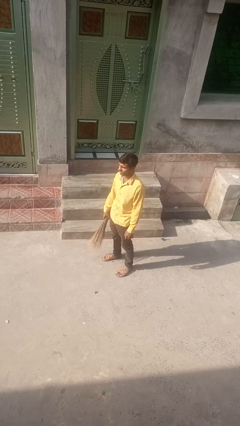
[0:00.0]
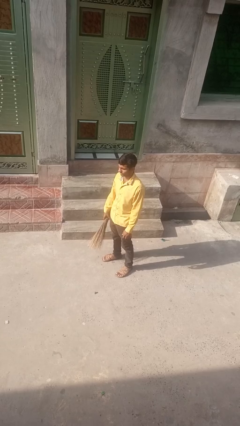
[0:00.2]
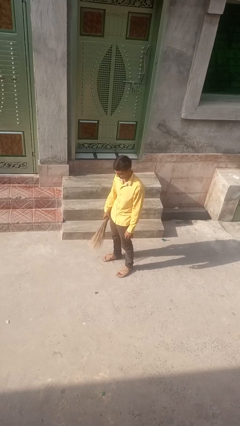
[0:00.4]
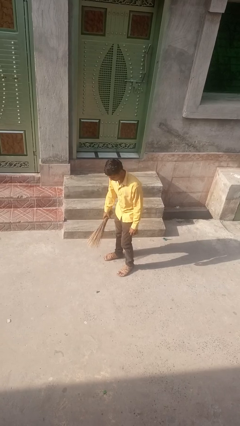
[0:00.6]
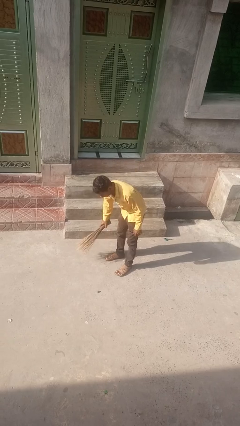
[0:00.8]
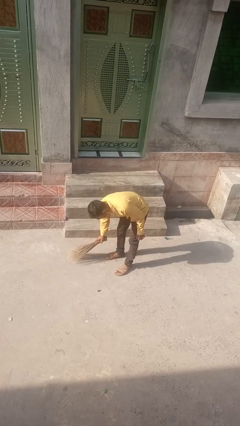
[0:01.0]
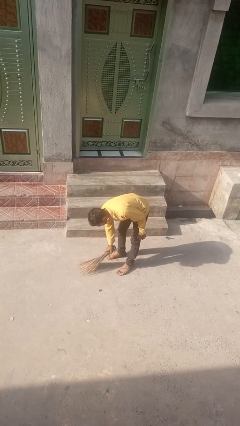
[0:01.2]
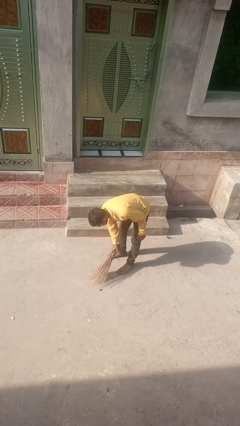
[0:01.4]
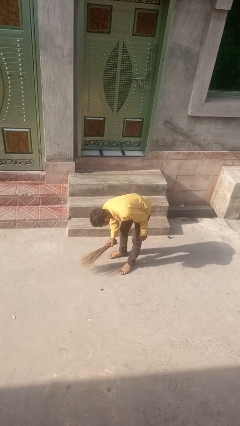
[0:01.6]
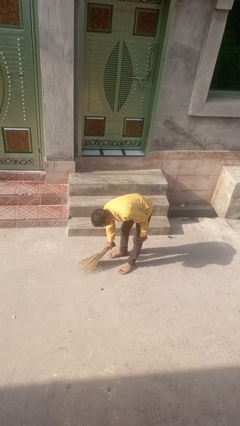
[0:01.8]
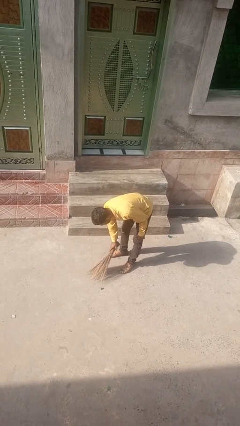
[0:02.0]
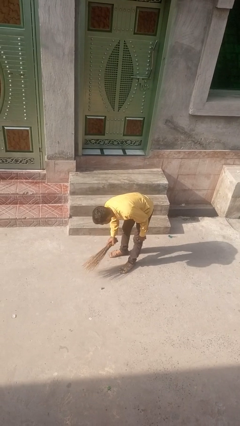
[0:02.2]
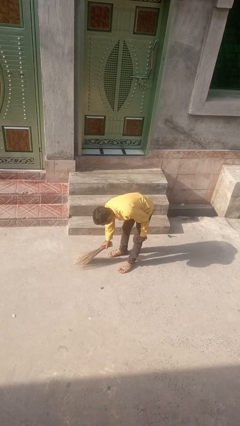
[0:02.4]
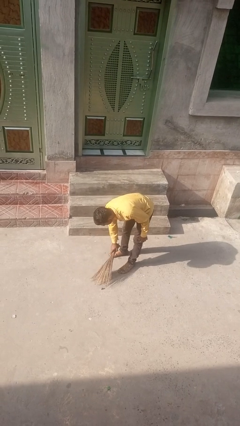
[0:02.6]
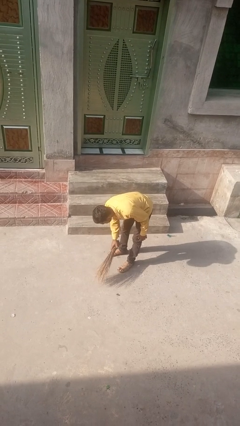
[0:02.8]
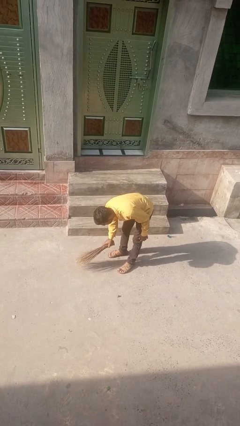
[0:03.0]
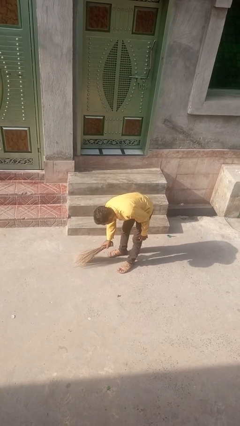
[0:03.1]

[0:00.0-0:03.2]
person sweeps floor

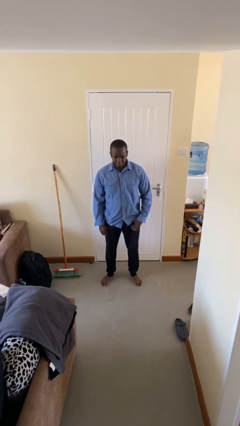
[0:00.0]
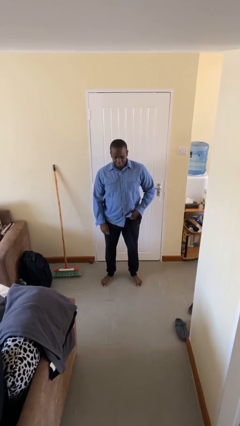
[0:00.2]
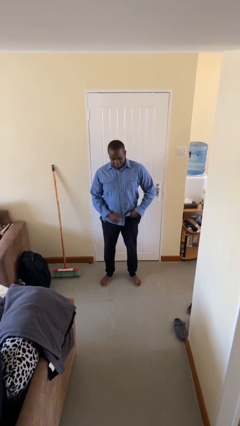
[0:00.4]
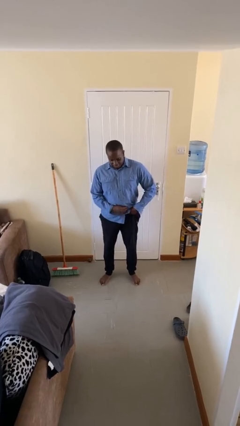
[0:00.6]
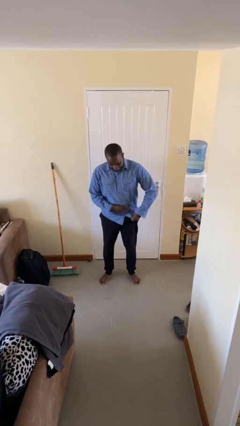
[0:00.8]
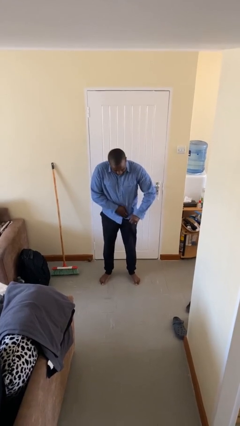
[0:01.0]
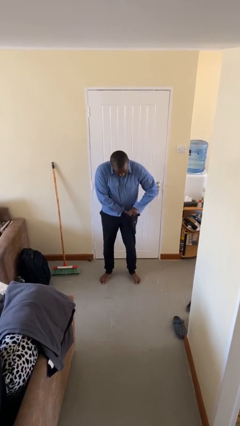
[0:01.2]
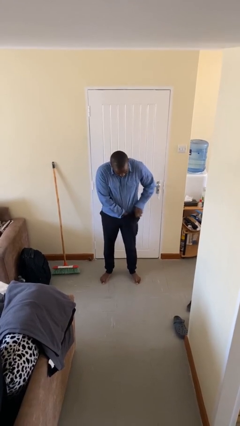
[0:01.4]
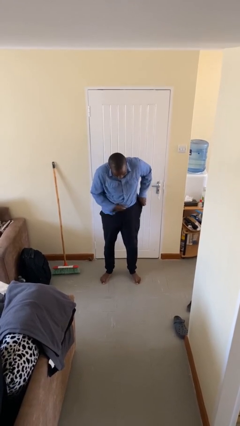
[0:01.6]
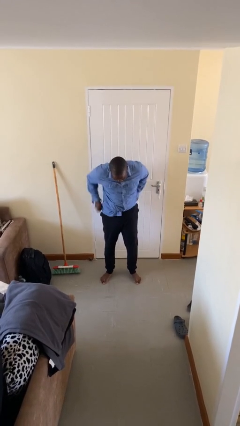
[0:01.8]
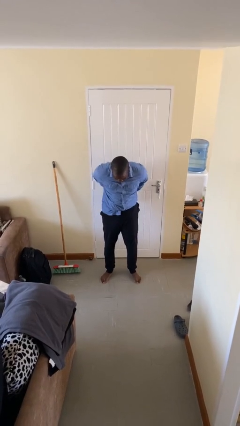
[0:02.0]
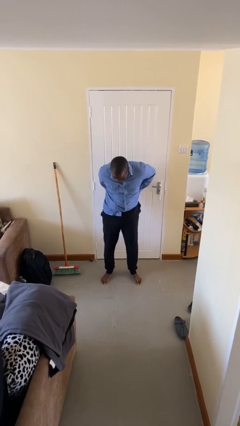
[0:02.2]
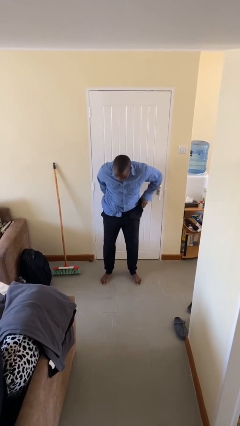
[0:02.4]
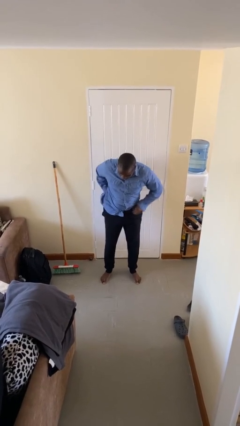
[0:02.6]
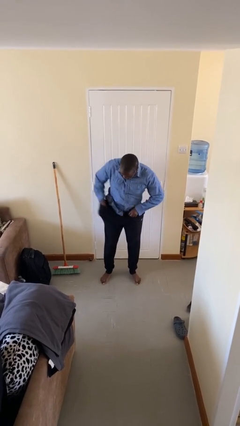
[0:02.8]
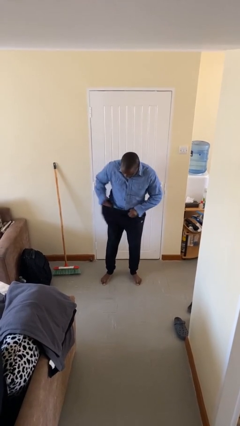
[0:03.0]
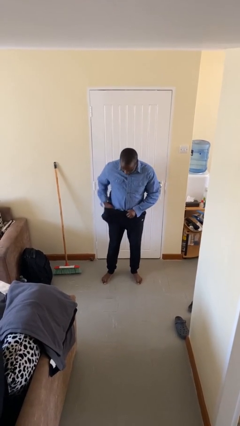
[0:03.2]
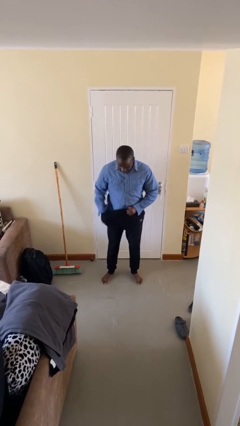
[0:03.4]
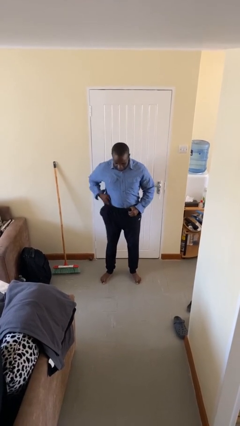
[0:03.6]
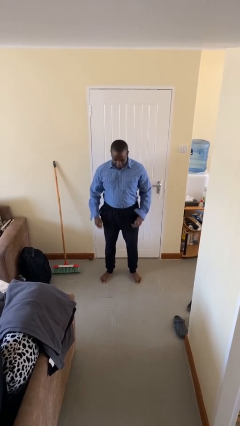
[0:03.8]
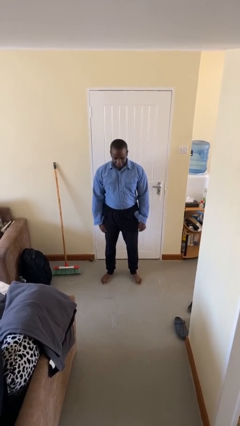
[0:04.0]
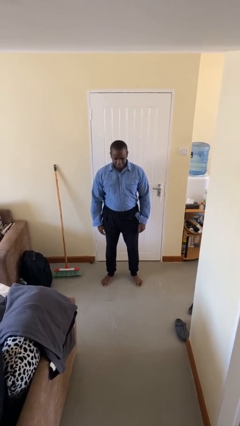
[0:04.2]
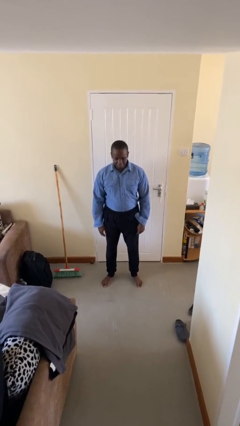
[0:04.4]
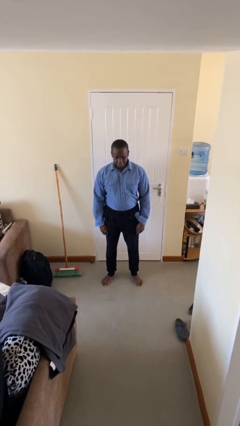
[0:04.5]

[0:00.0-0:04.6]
person tucks in shirt

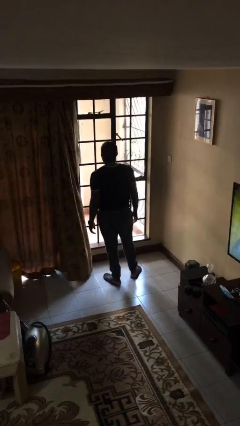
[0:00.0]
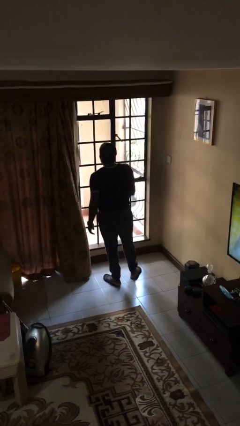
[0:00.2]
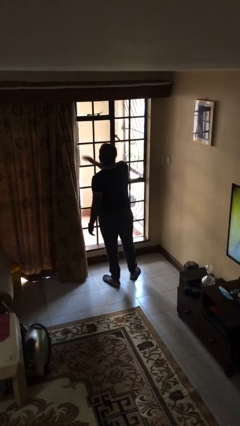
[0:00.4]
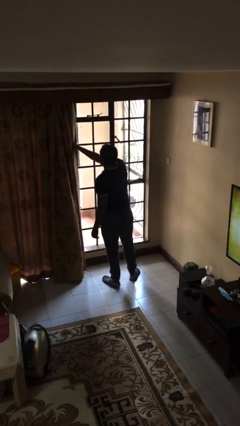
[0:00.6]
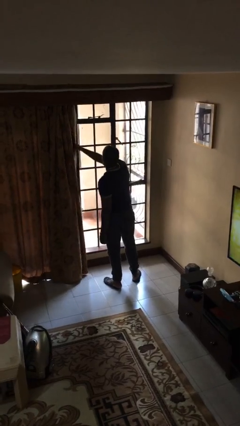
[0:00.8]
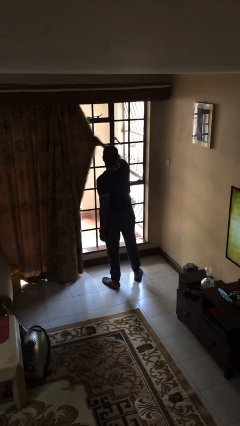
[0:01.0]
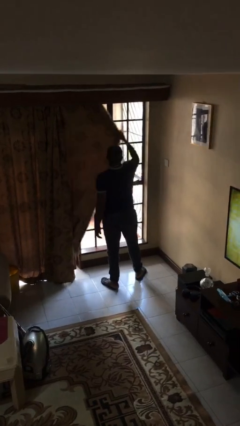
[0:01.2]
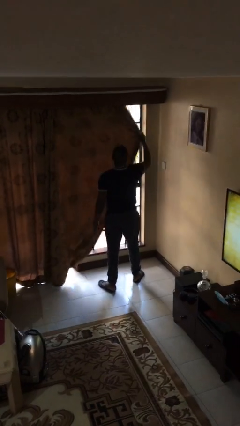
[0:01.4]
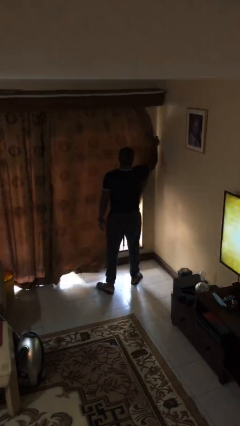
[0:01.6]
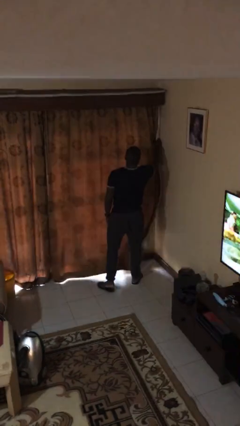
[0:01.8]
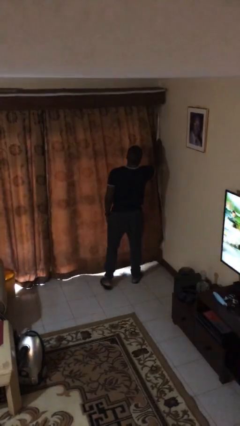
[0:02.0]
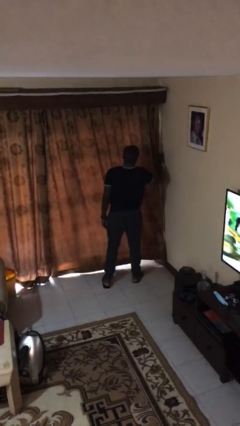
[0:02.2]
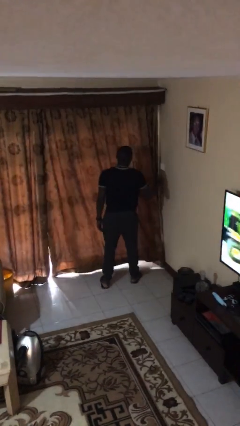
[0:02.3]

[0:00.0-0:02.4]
person closes curtains

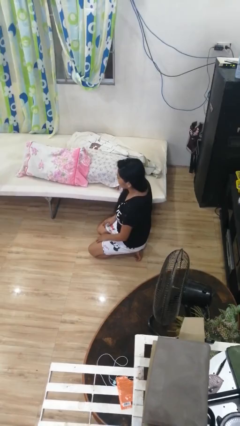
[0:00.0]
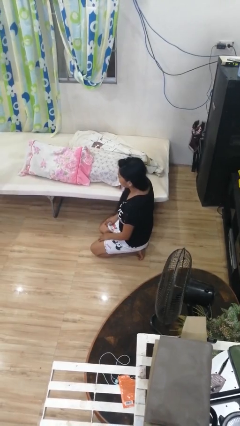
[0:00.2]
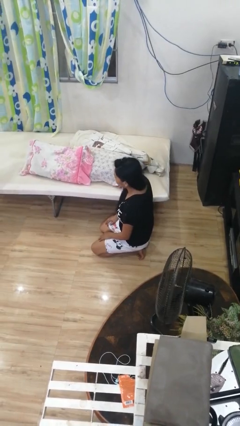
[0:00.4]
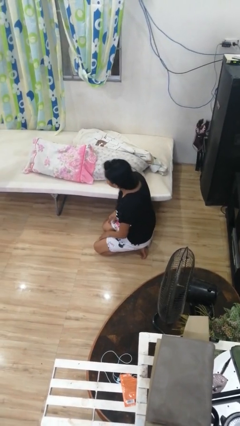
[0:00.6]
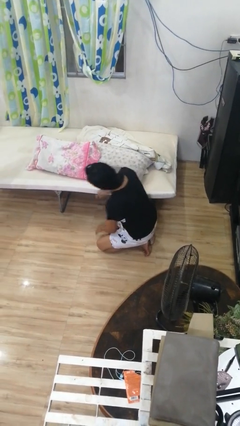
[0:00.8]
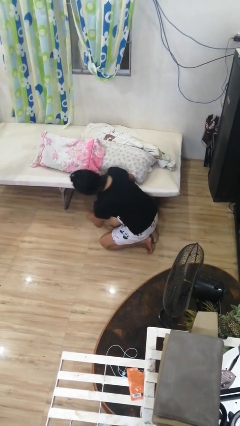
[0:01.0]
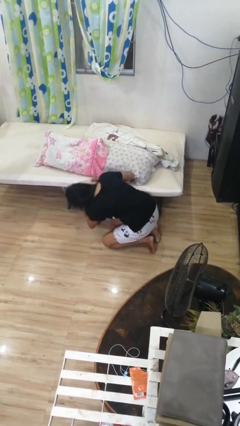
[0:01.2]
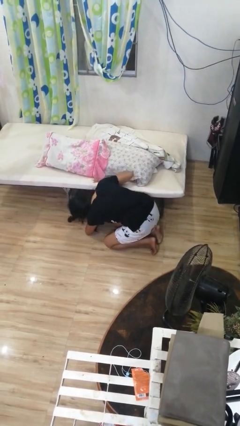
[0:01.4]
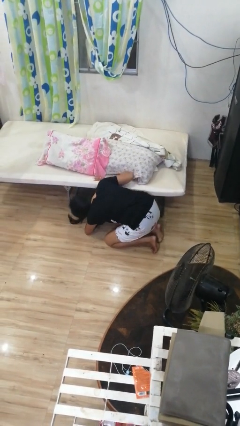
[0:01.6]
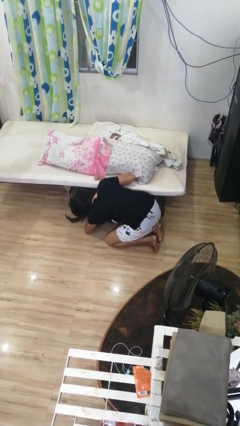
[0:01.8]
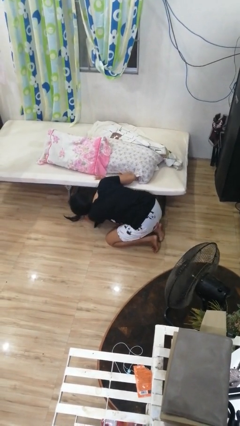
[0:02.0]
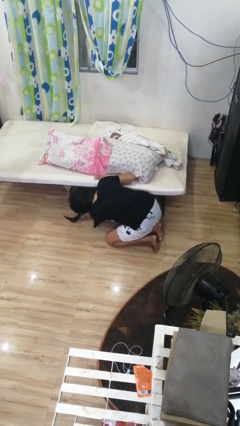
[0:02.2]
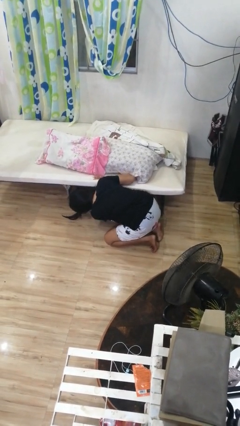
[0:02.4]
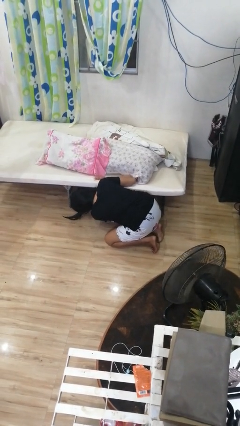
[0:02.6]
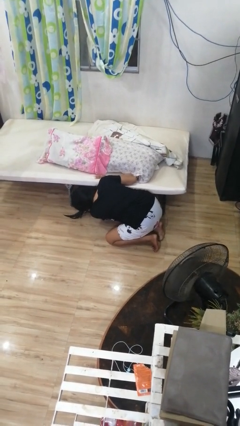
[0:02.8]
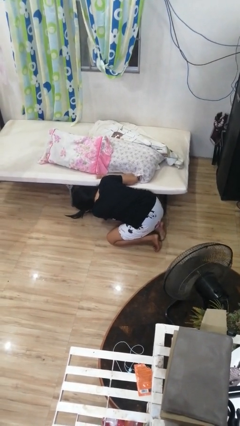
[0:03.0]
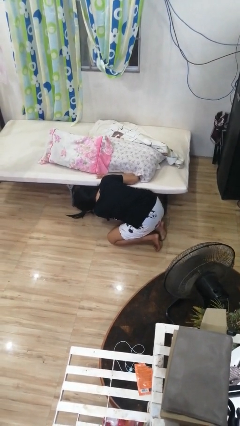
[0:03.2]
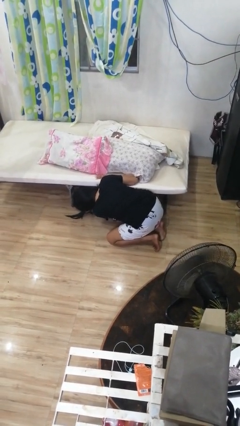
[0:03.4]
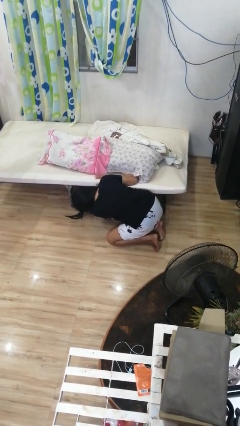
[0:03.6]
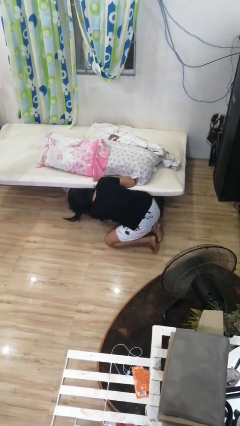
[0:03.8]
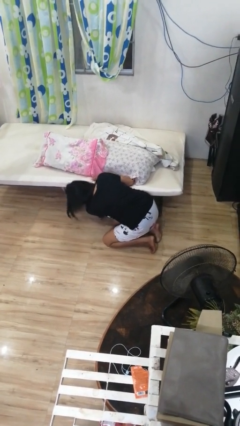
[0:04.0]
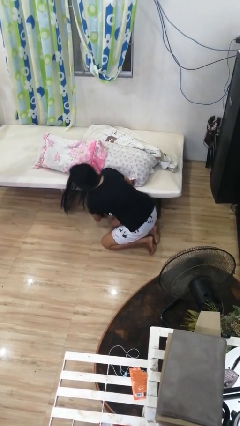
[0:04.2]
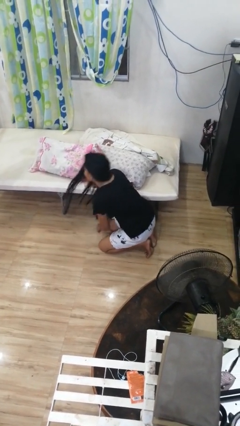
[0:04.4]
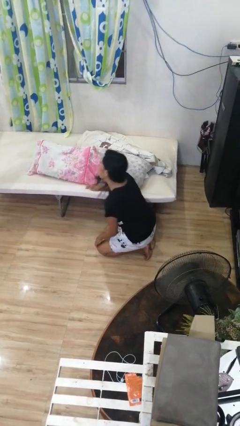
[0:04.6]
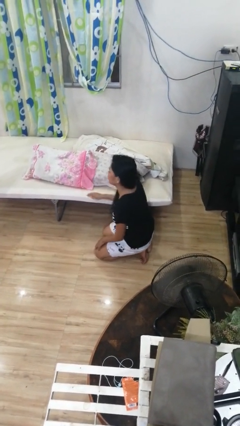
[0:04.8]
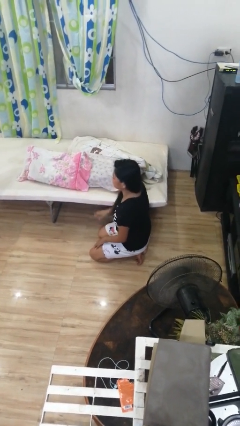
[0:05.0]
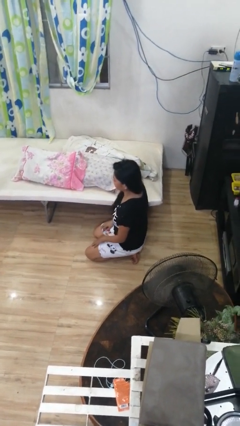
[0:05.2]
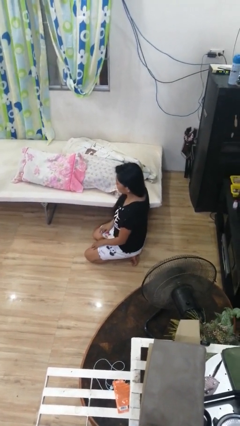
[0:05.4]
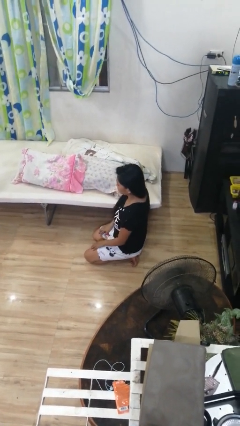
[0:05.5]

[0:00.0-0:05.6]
person searches under bed

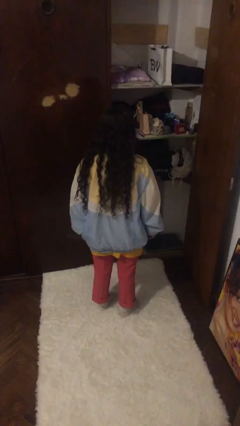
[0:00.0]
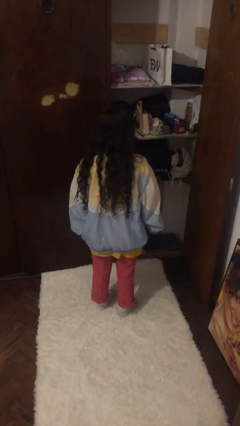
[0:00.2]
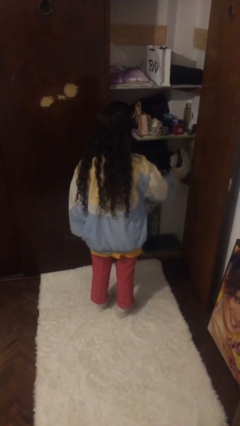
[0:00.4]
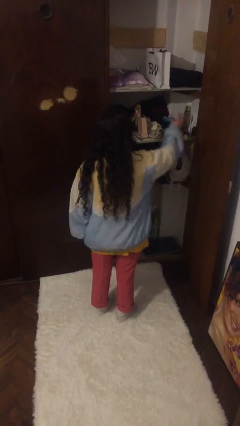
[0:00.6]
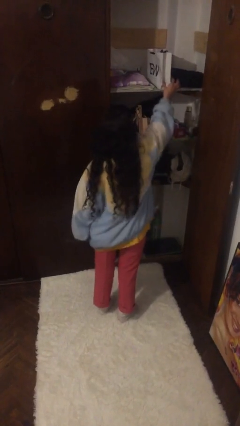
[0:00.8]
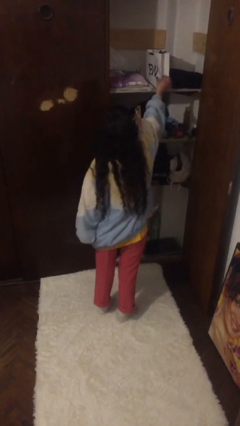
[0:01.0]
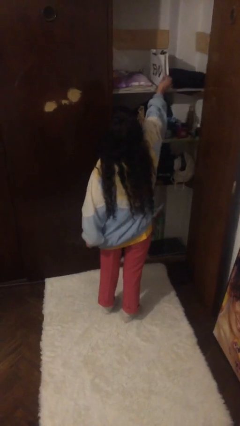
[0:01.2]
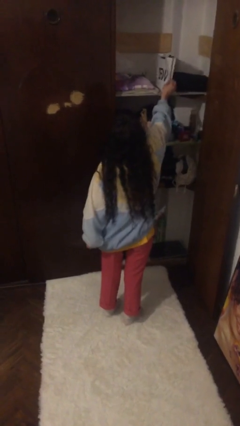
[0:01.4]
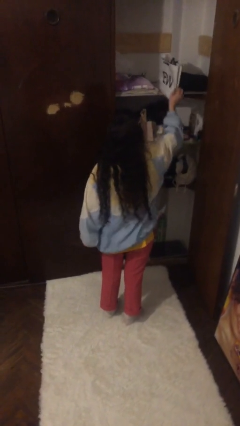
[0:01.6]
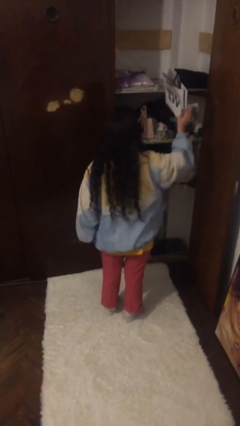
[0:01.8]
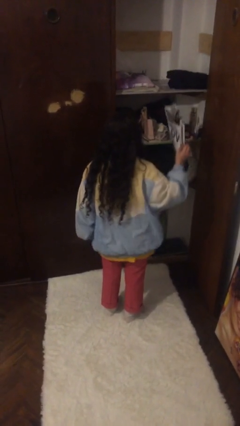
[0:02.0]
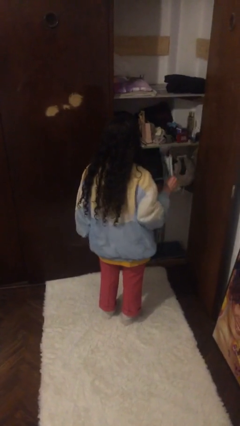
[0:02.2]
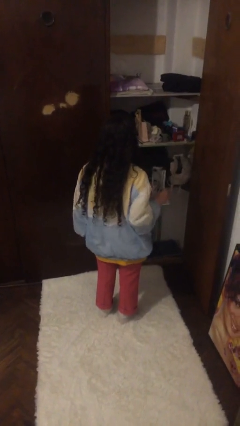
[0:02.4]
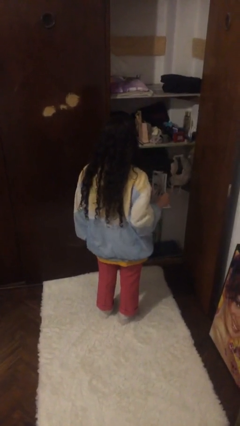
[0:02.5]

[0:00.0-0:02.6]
person picks up object from shelf
